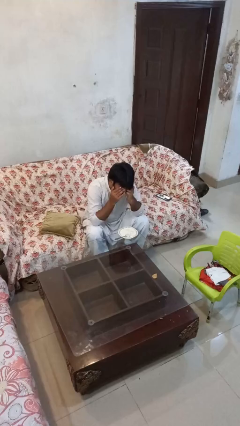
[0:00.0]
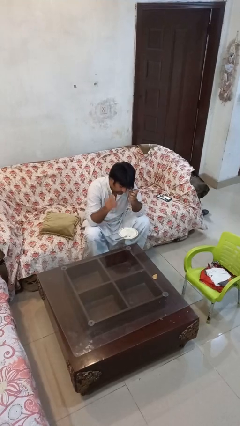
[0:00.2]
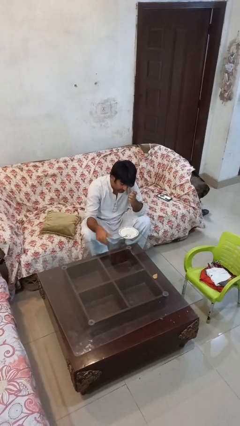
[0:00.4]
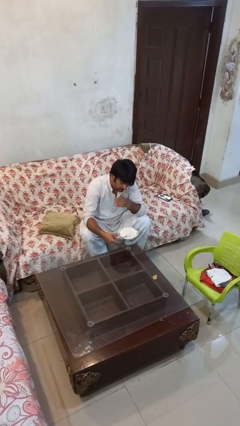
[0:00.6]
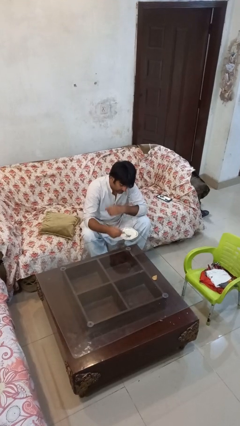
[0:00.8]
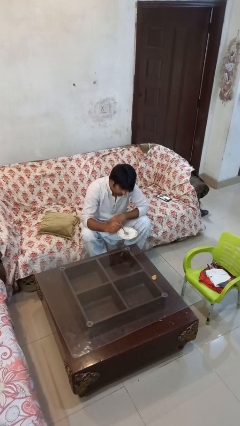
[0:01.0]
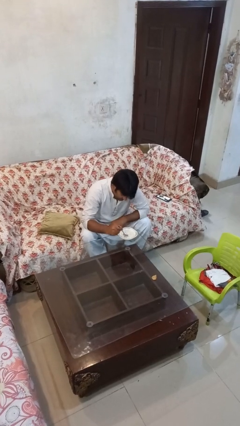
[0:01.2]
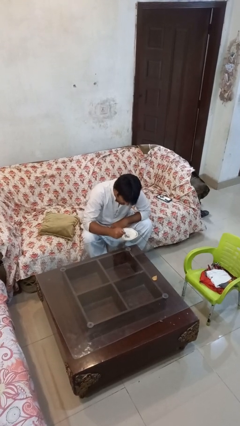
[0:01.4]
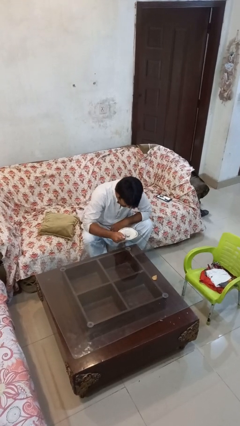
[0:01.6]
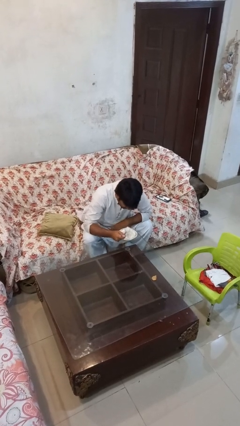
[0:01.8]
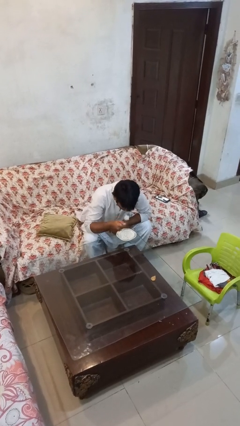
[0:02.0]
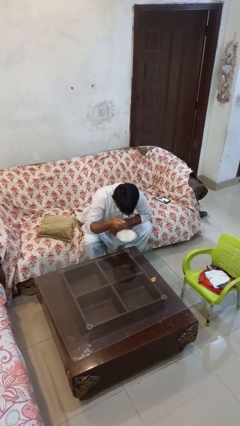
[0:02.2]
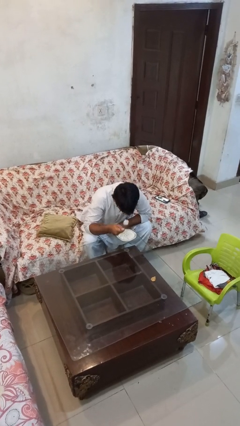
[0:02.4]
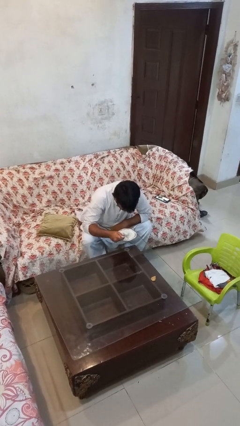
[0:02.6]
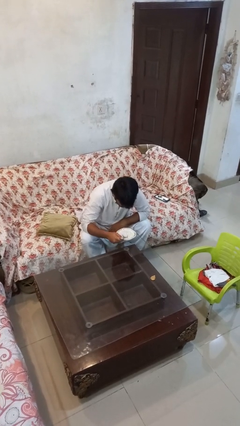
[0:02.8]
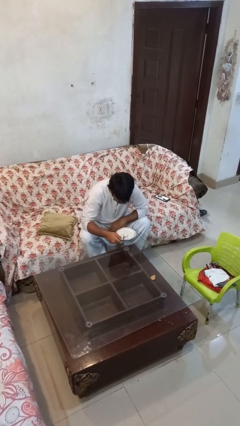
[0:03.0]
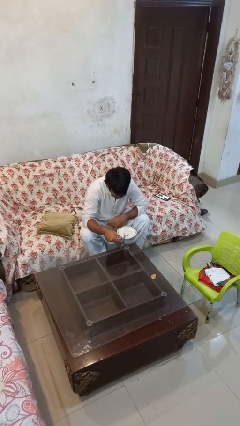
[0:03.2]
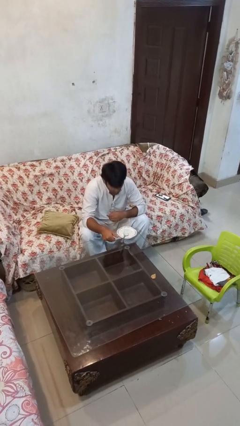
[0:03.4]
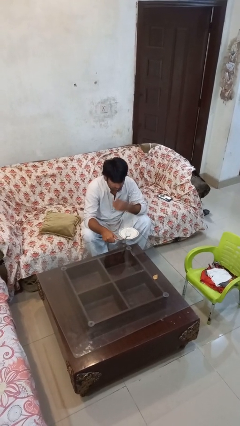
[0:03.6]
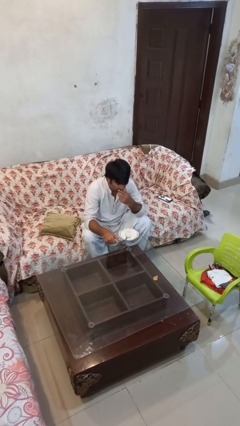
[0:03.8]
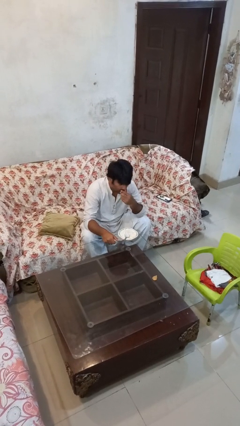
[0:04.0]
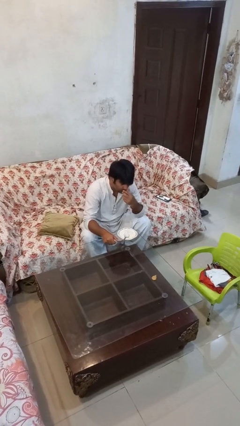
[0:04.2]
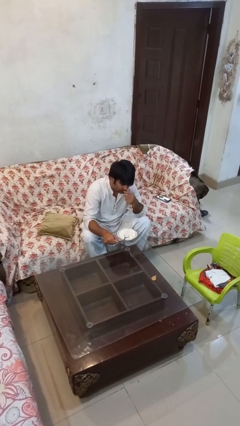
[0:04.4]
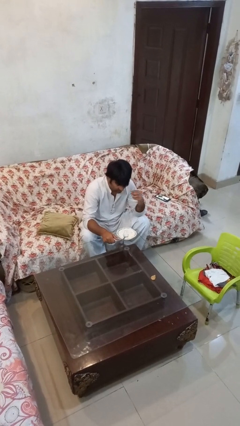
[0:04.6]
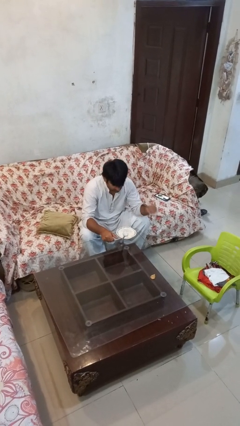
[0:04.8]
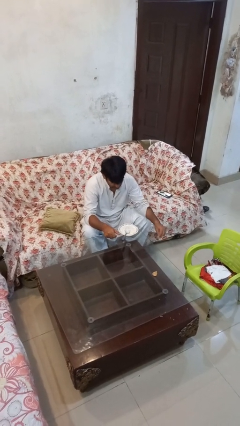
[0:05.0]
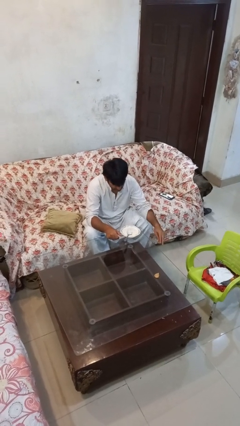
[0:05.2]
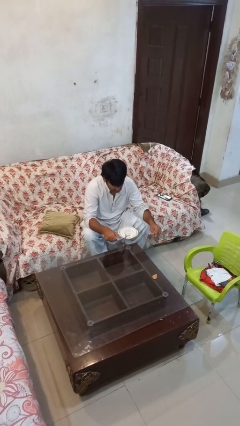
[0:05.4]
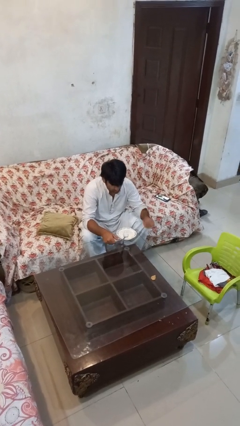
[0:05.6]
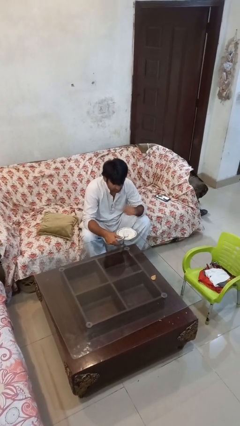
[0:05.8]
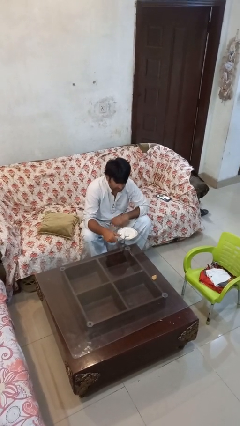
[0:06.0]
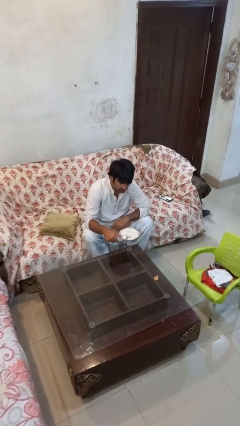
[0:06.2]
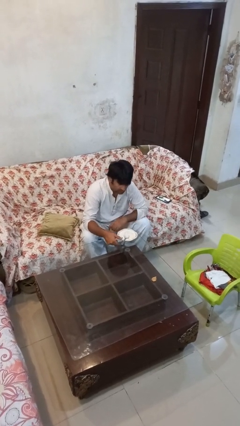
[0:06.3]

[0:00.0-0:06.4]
person eats with utensil

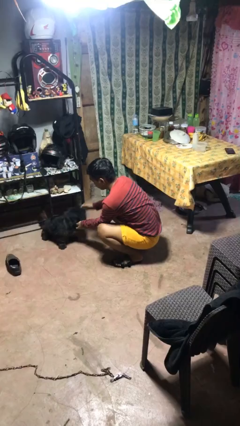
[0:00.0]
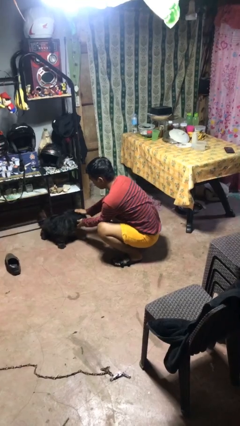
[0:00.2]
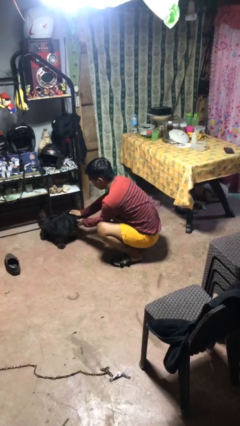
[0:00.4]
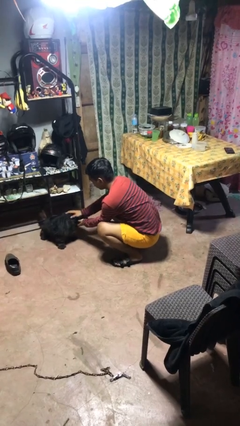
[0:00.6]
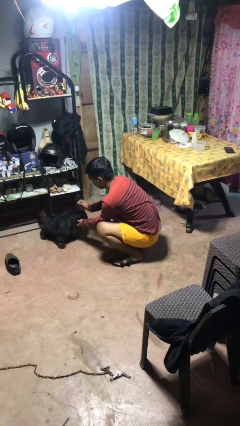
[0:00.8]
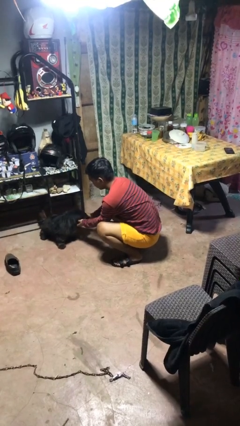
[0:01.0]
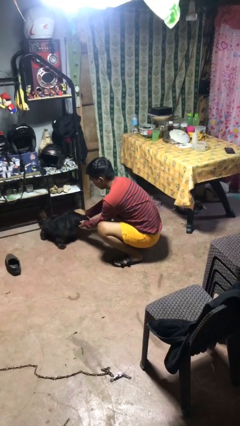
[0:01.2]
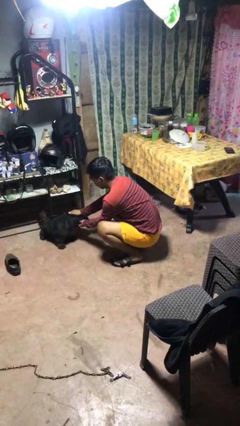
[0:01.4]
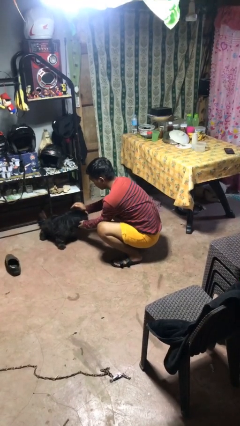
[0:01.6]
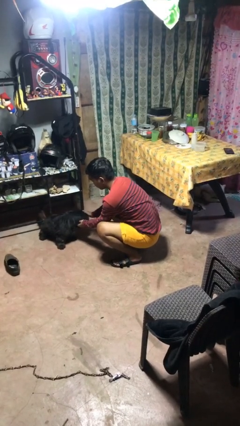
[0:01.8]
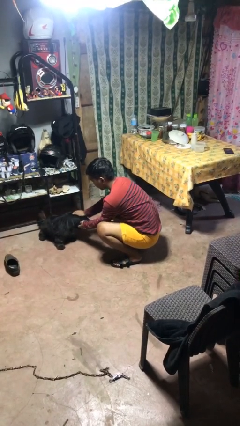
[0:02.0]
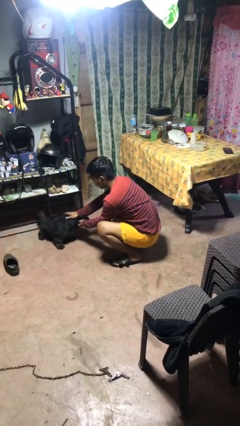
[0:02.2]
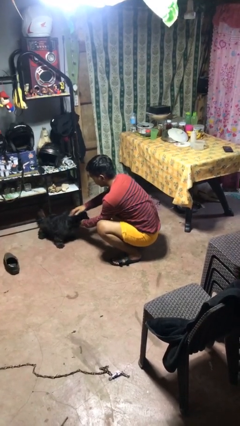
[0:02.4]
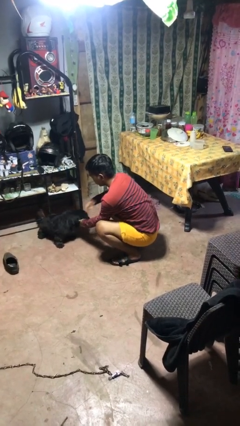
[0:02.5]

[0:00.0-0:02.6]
person pets dog

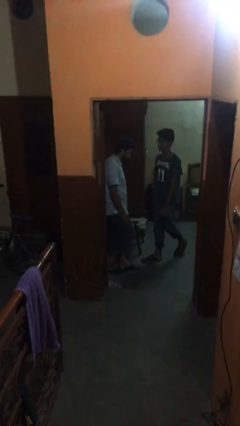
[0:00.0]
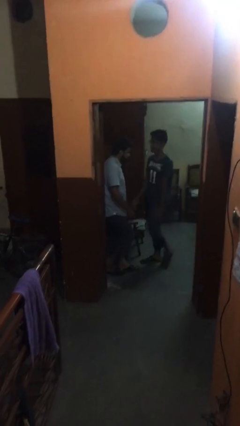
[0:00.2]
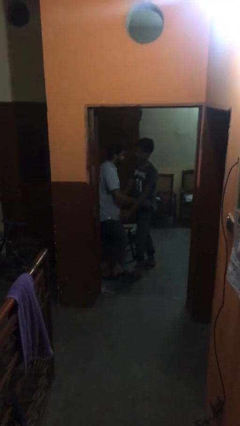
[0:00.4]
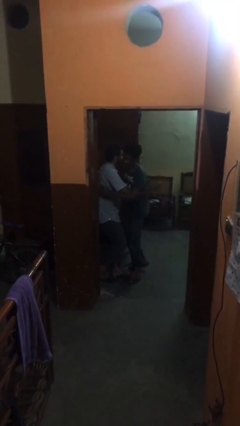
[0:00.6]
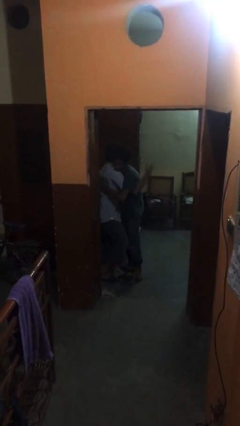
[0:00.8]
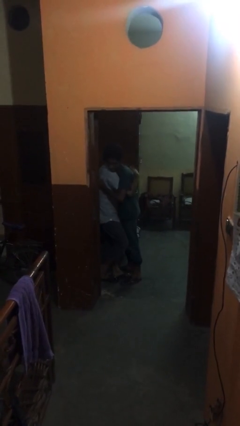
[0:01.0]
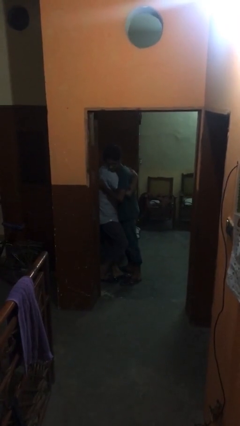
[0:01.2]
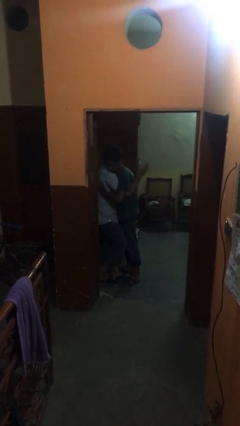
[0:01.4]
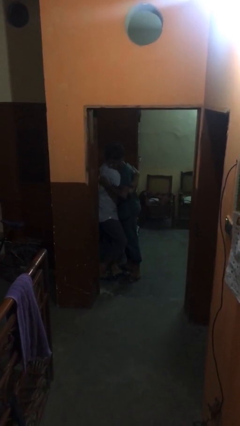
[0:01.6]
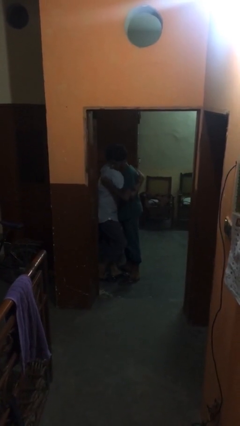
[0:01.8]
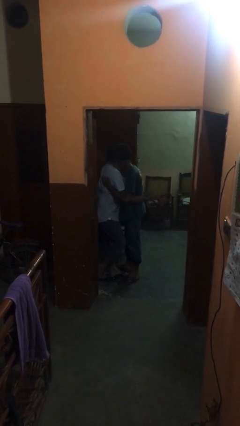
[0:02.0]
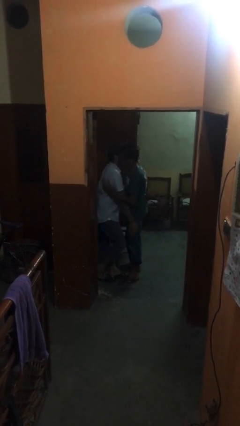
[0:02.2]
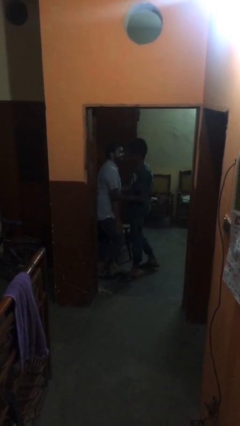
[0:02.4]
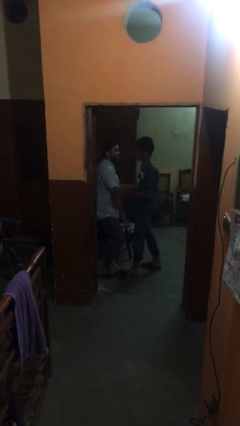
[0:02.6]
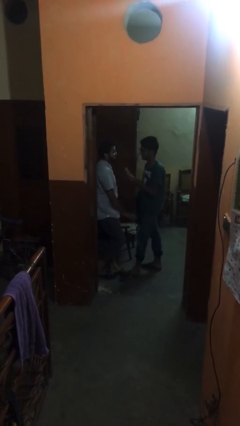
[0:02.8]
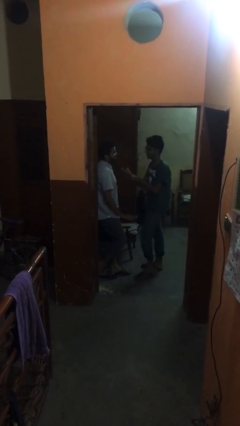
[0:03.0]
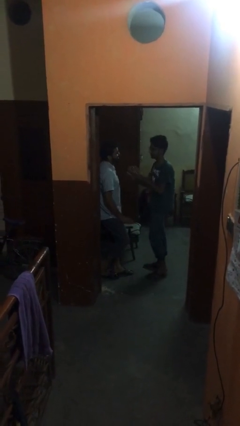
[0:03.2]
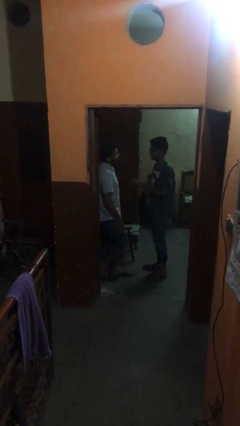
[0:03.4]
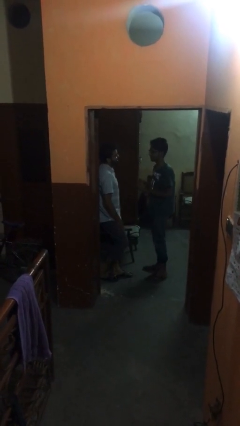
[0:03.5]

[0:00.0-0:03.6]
person embraces person

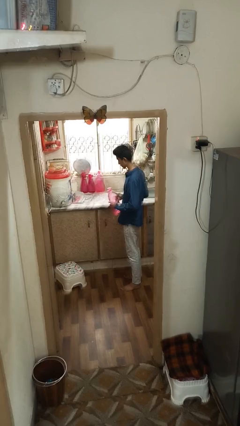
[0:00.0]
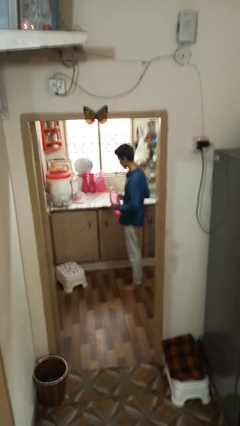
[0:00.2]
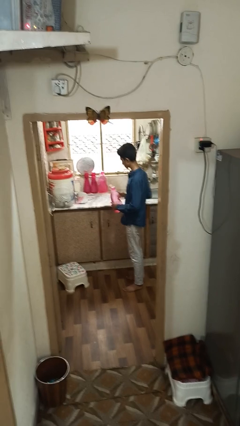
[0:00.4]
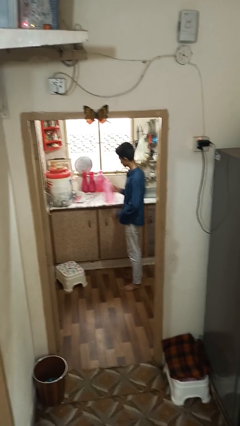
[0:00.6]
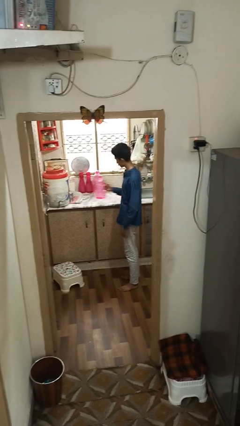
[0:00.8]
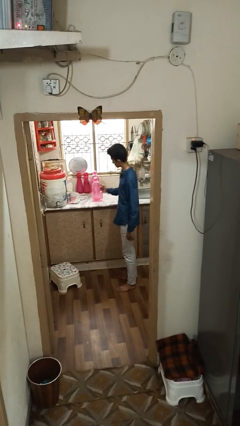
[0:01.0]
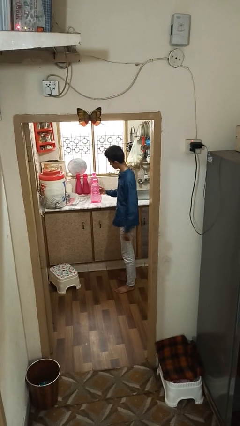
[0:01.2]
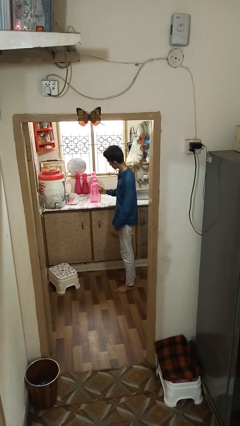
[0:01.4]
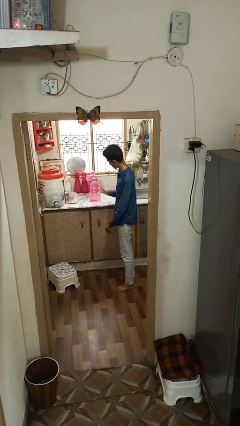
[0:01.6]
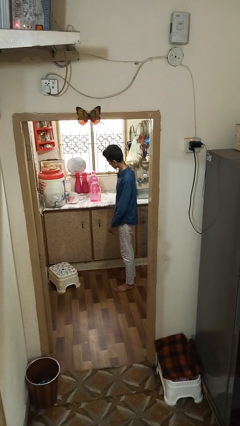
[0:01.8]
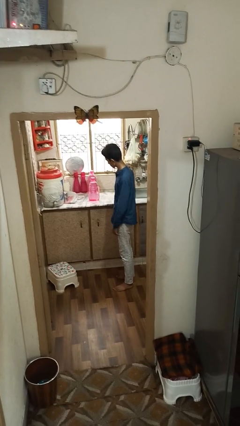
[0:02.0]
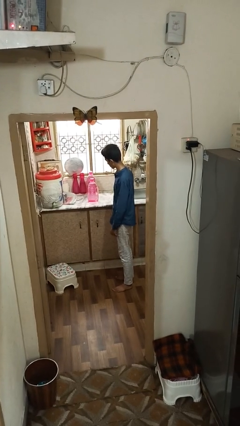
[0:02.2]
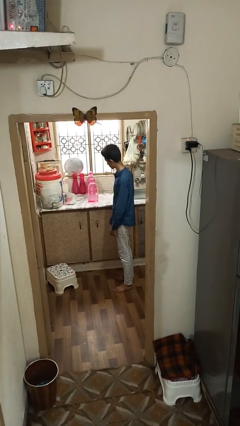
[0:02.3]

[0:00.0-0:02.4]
person puts down object on countertop

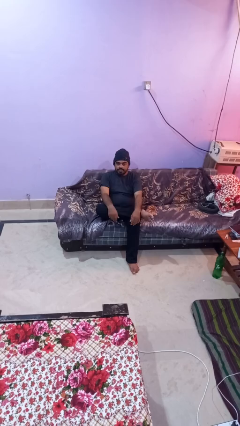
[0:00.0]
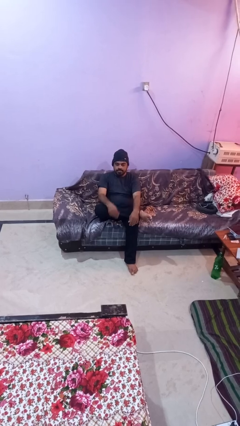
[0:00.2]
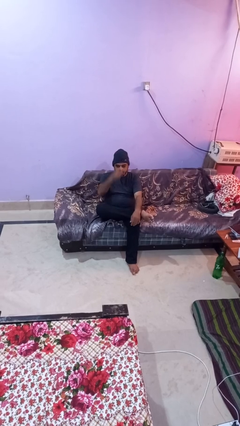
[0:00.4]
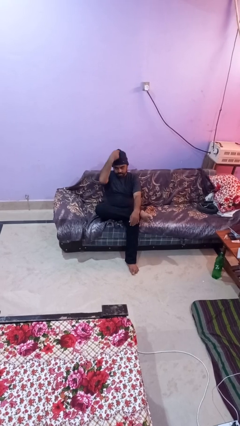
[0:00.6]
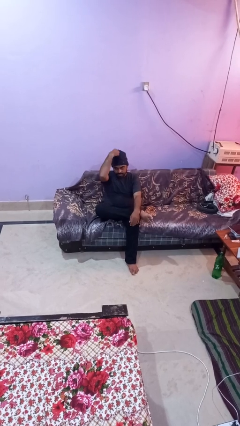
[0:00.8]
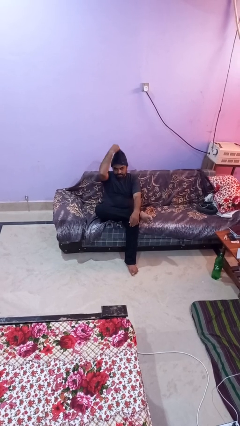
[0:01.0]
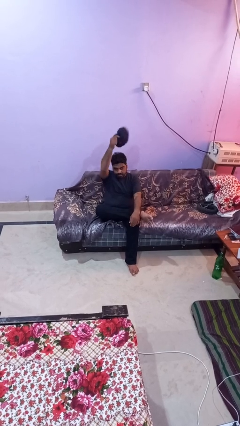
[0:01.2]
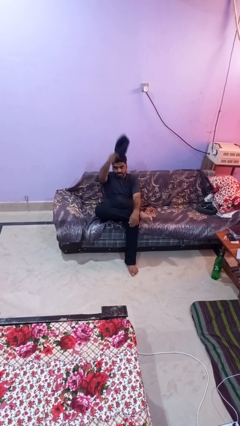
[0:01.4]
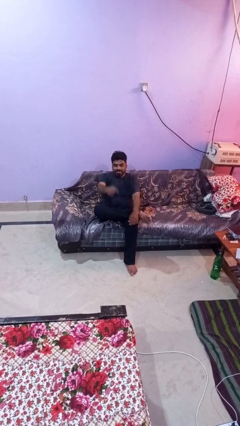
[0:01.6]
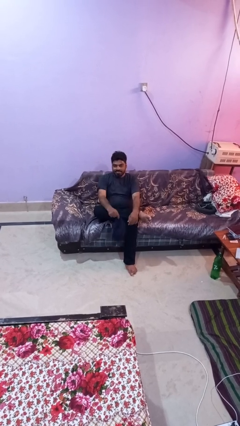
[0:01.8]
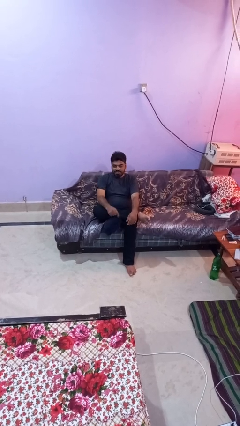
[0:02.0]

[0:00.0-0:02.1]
person takes off hat

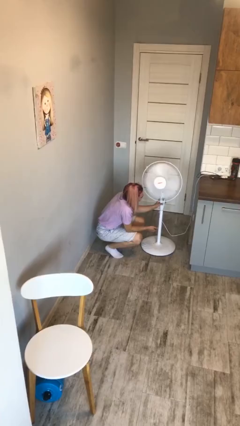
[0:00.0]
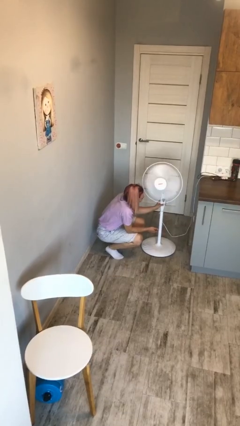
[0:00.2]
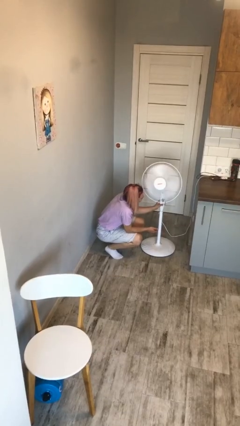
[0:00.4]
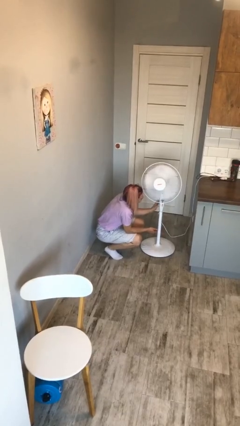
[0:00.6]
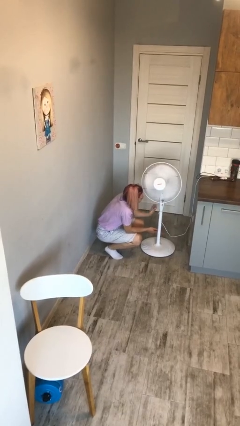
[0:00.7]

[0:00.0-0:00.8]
person turns off fan
